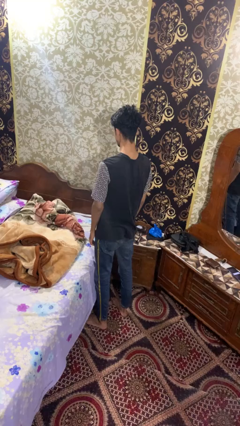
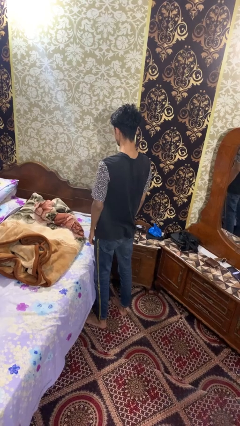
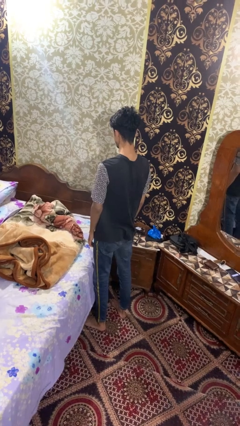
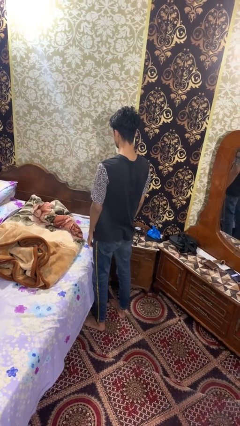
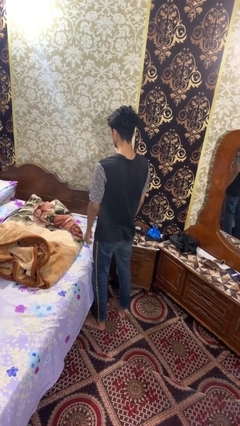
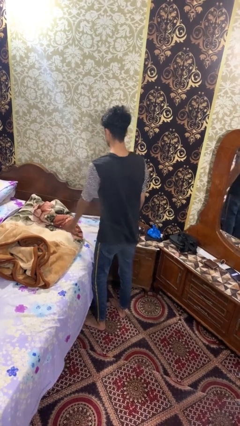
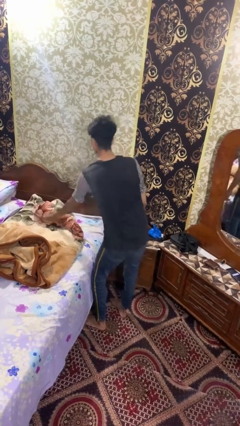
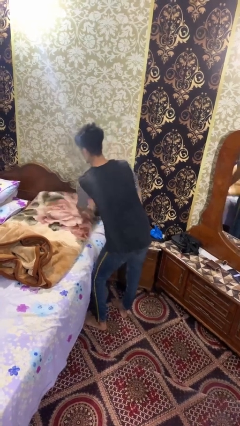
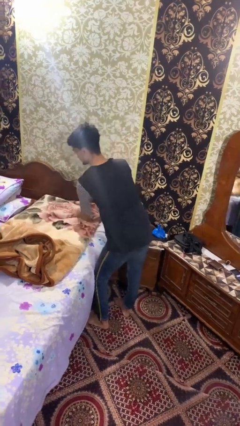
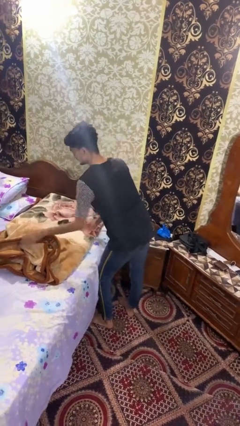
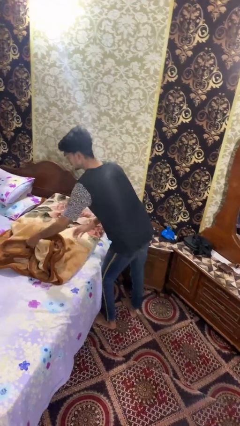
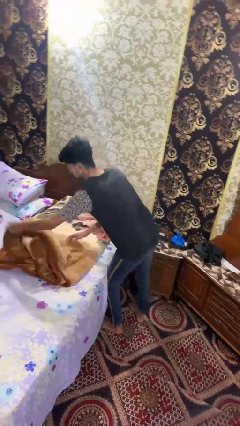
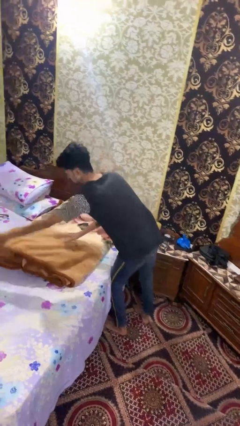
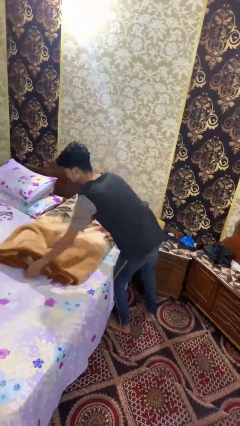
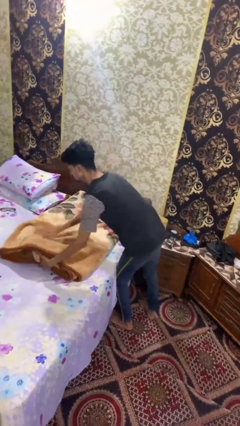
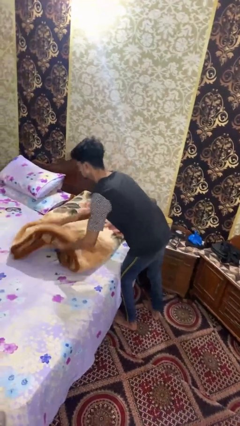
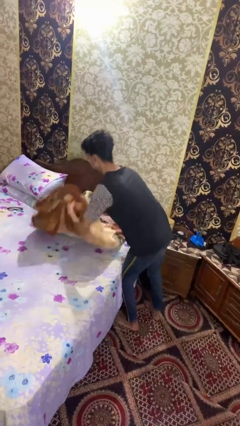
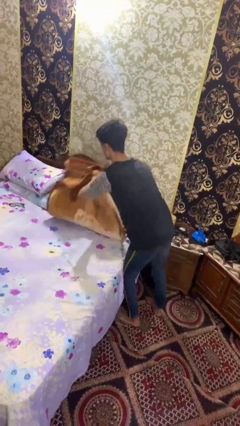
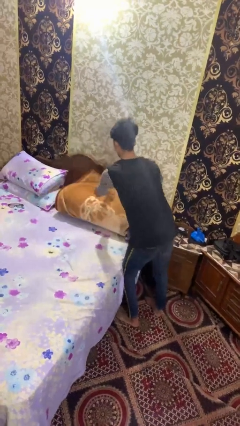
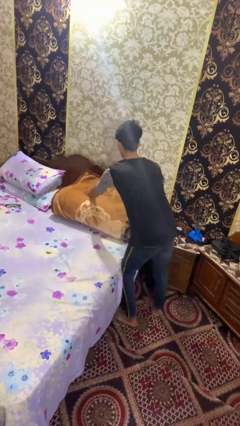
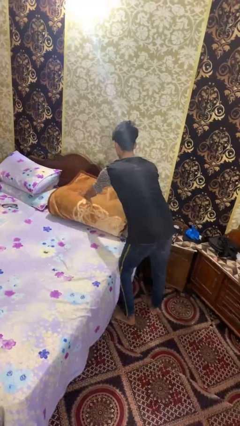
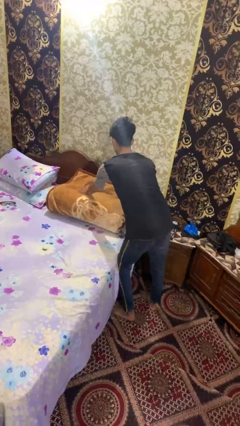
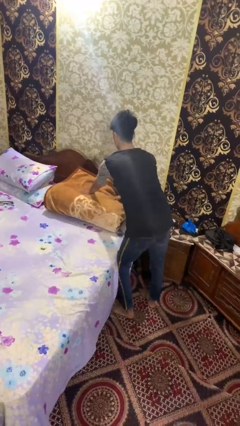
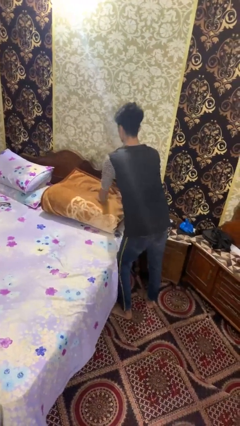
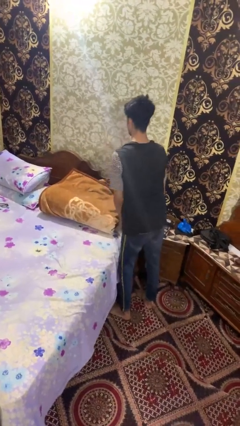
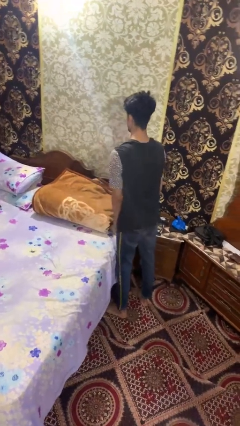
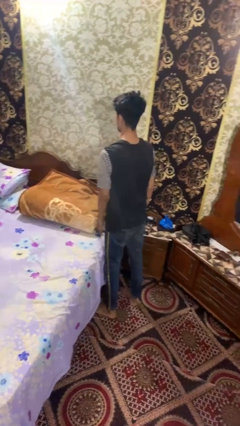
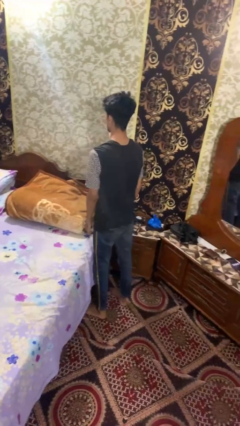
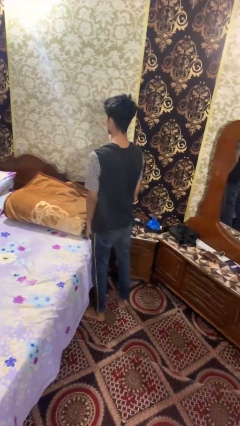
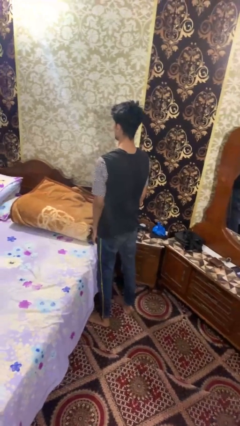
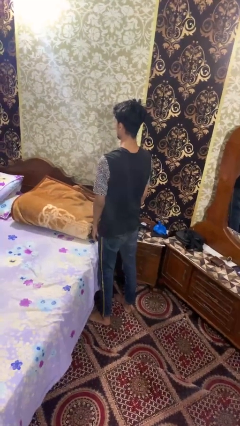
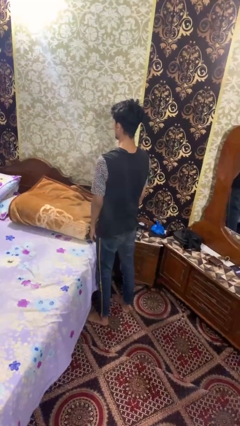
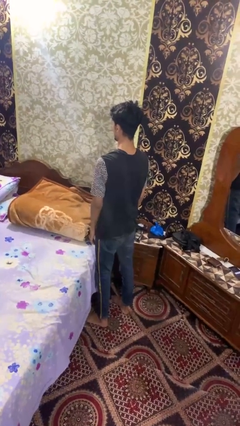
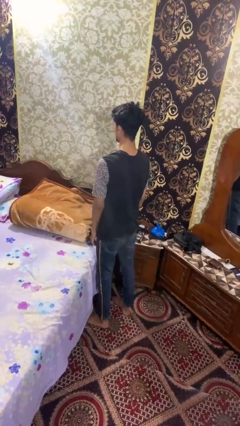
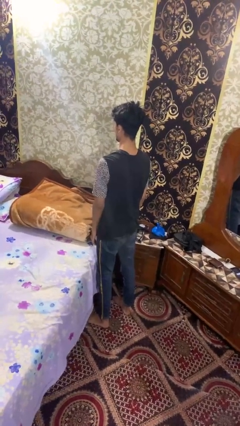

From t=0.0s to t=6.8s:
person folds blanket

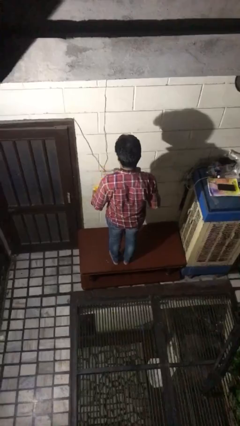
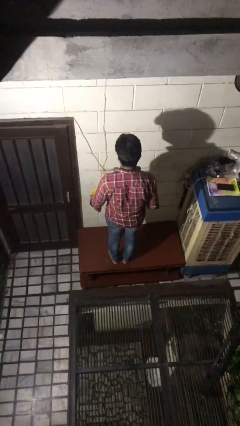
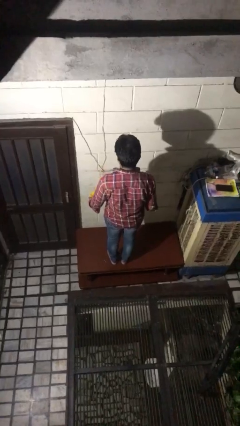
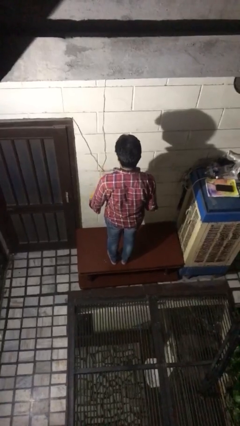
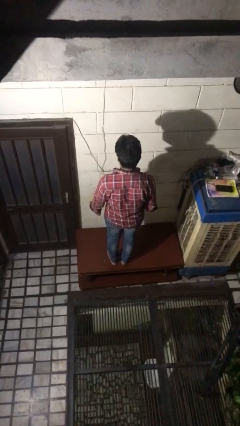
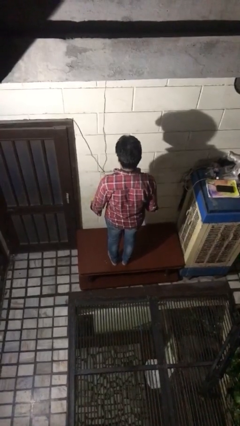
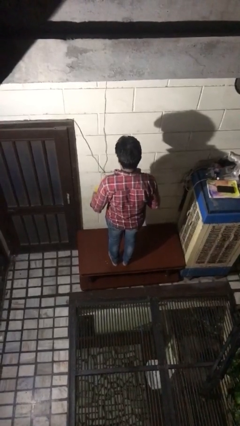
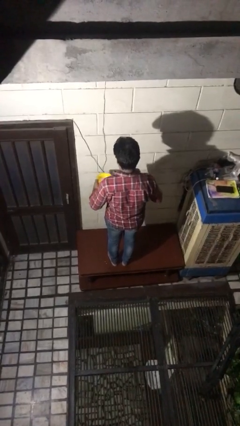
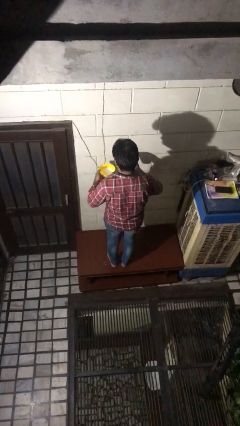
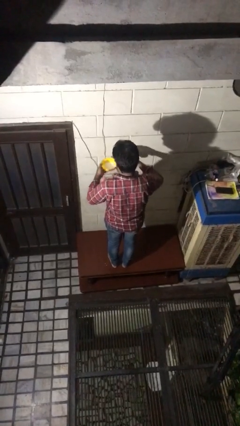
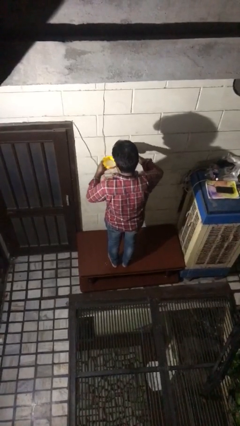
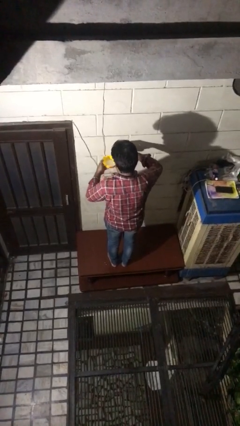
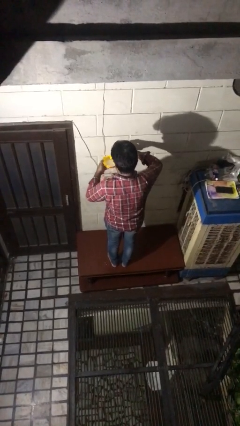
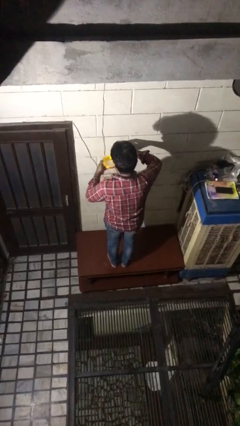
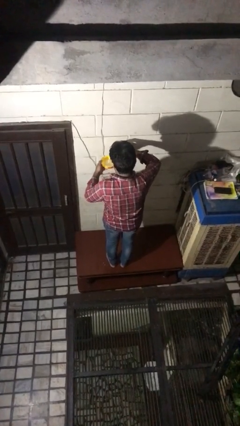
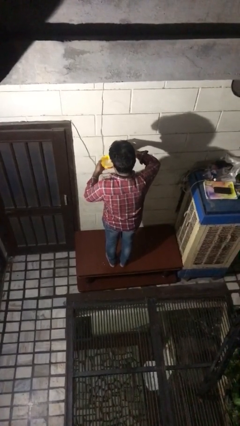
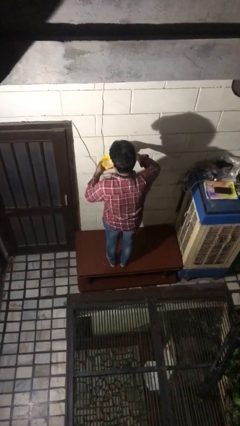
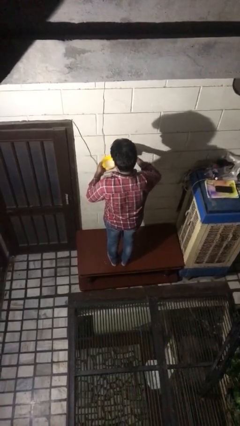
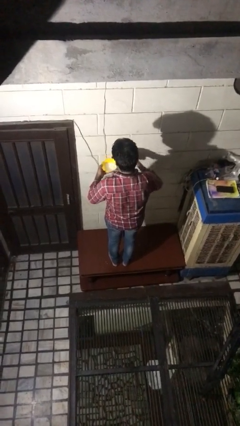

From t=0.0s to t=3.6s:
person pours into bowl

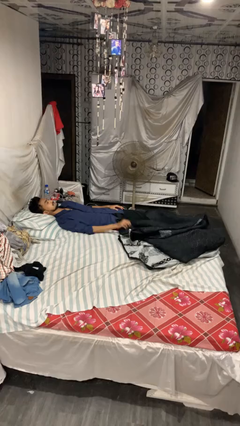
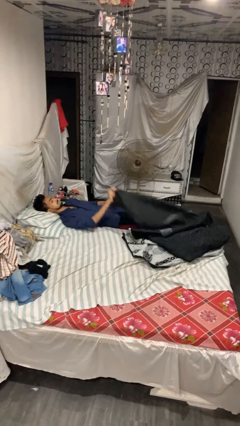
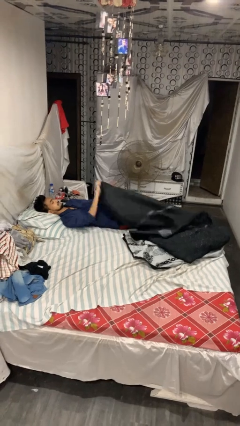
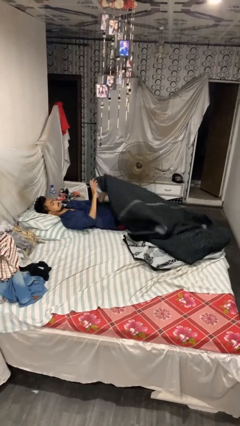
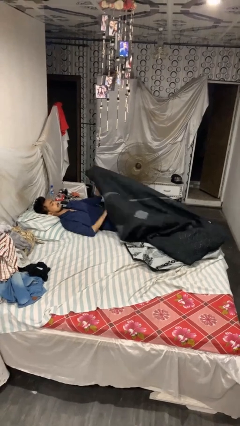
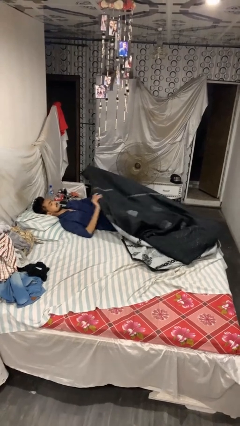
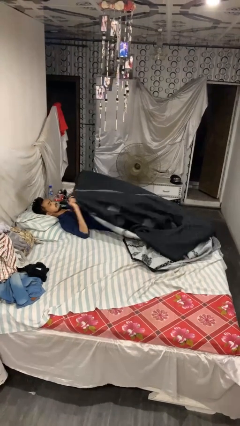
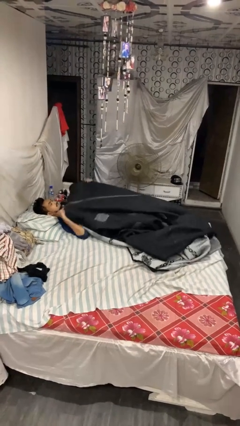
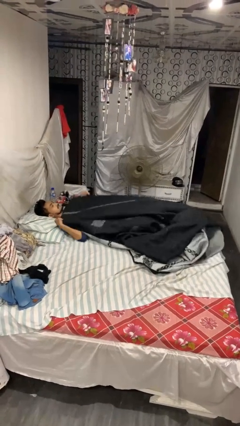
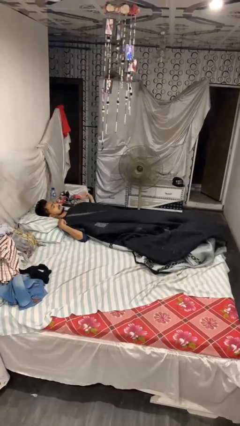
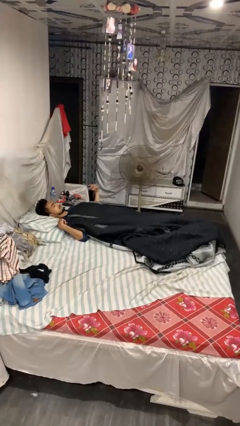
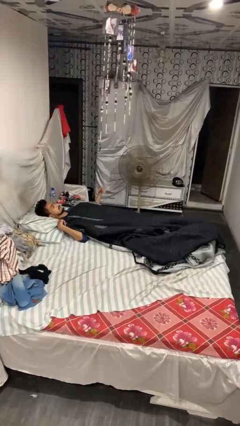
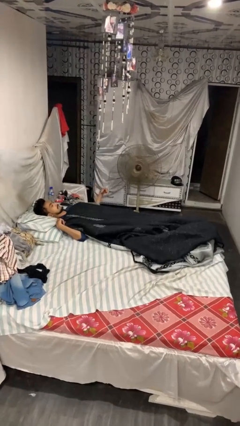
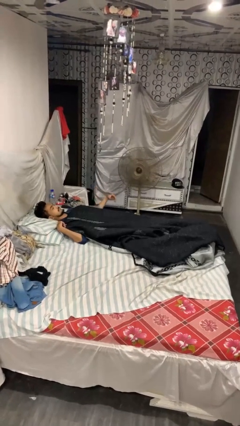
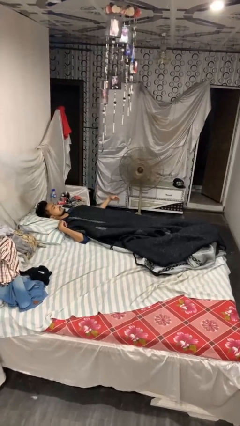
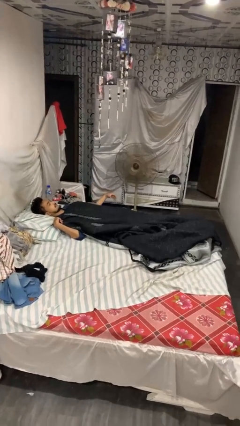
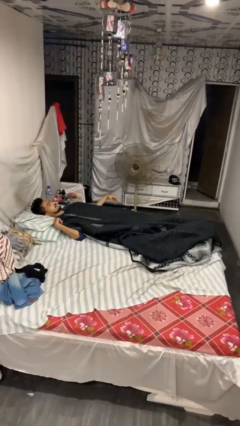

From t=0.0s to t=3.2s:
person covers with blanket

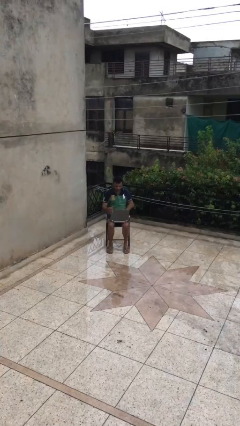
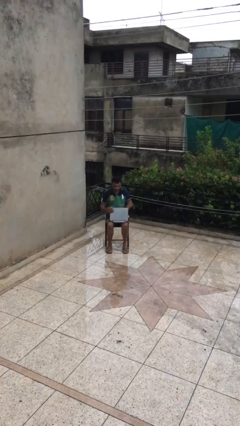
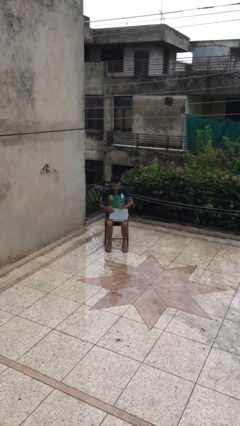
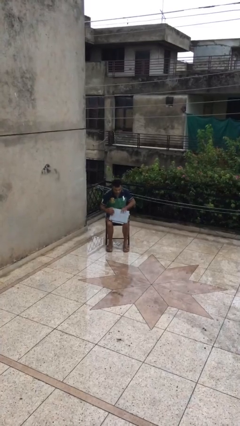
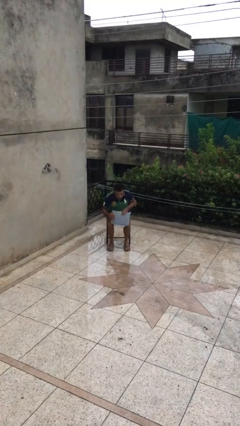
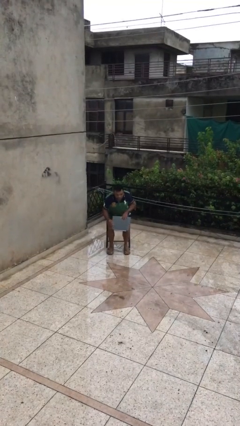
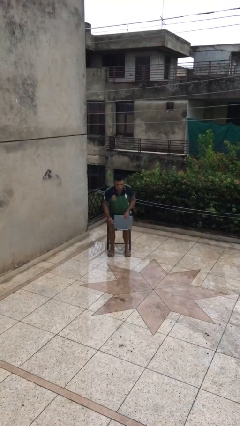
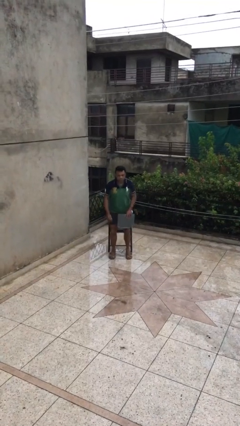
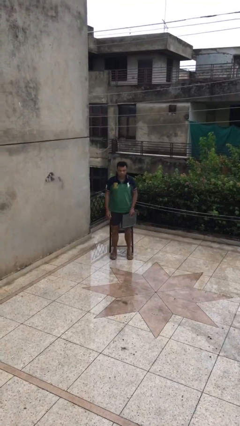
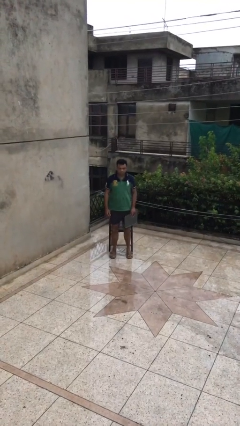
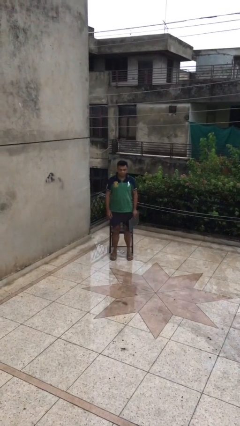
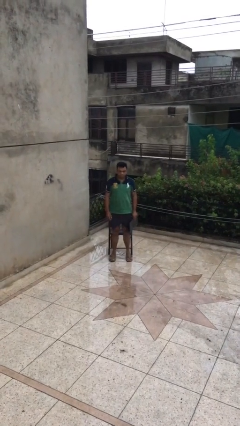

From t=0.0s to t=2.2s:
person stands up

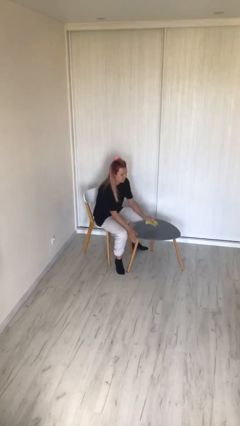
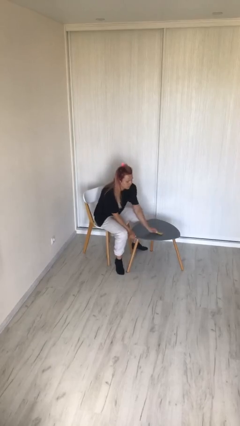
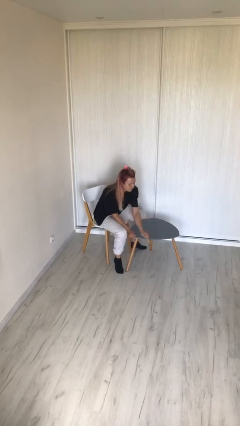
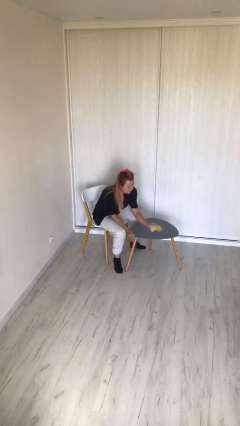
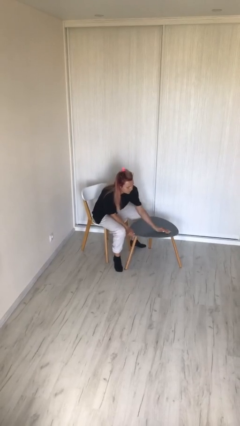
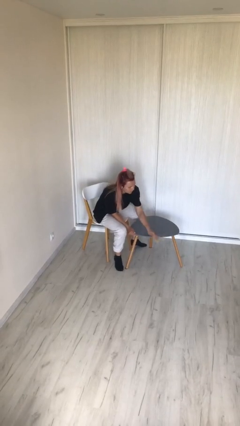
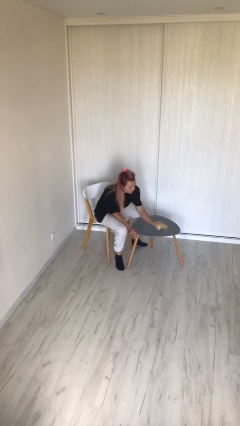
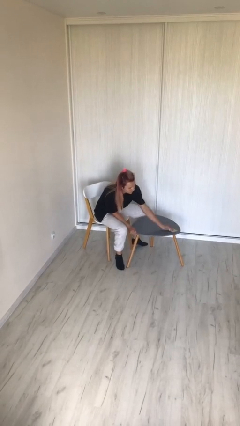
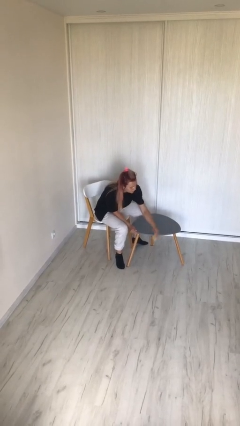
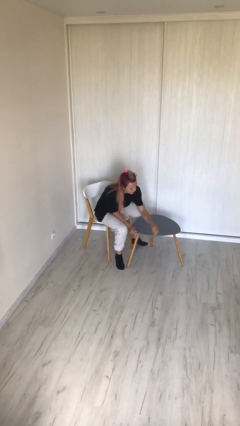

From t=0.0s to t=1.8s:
person cleans table with rag
